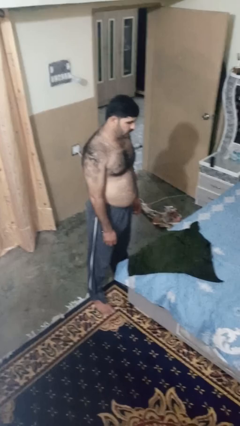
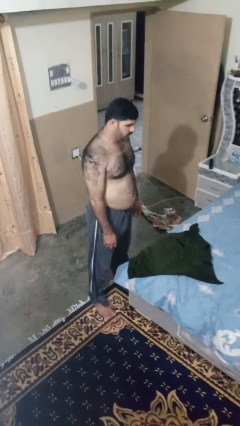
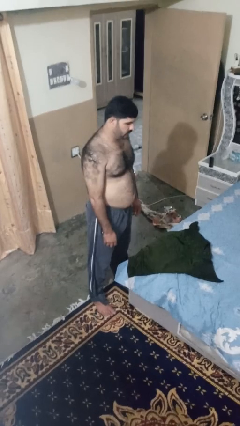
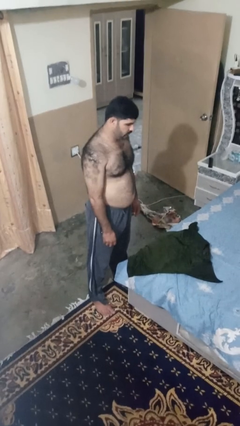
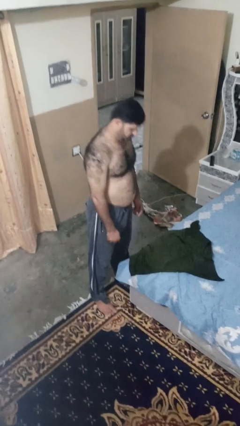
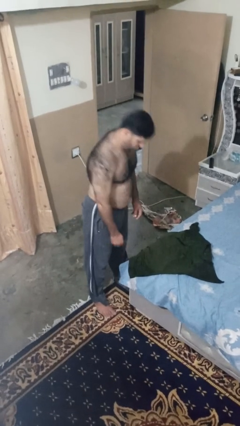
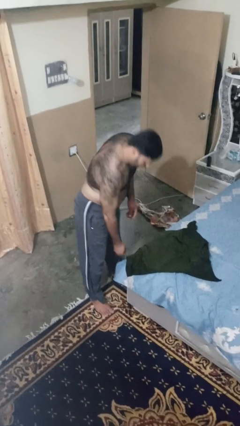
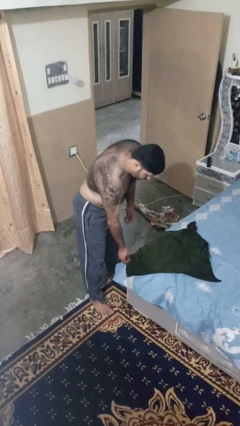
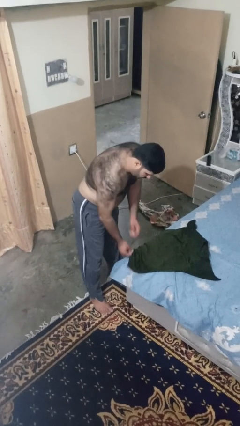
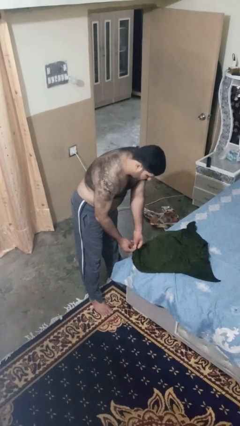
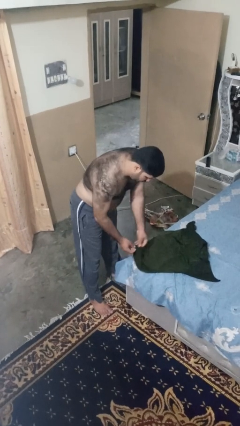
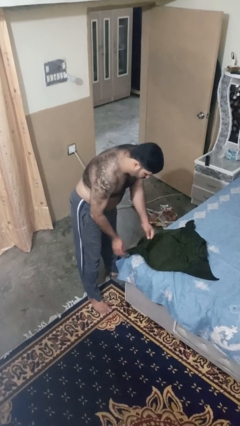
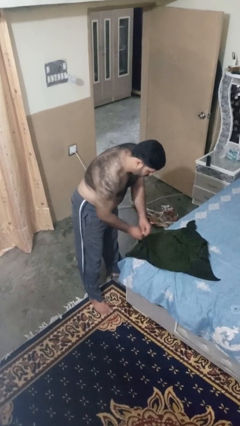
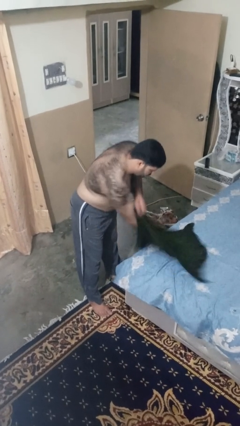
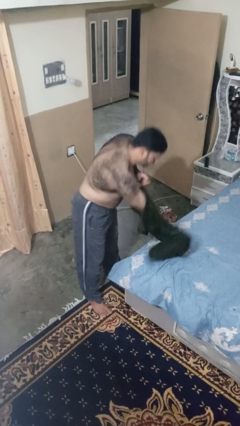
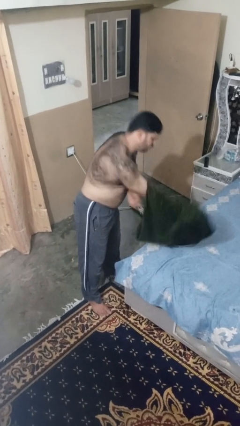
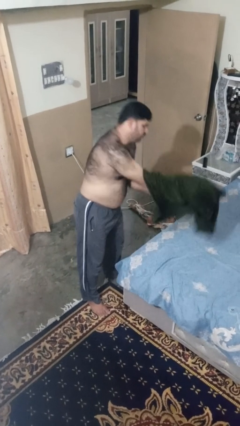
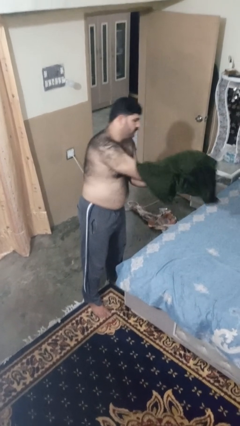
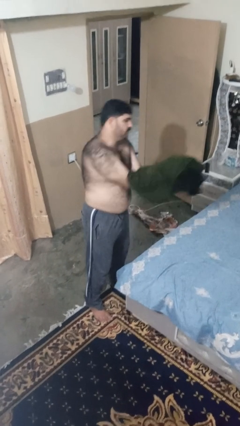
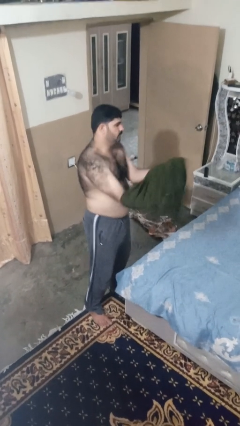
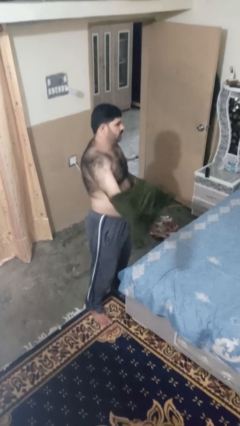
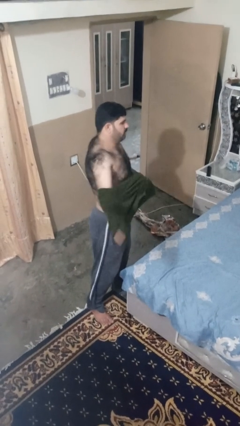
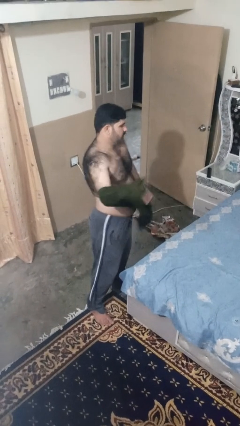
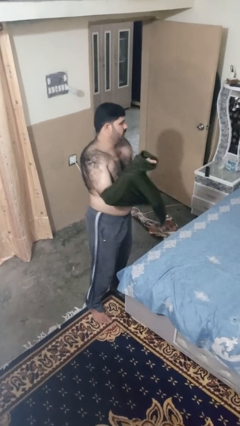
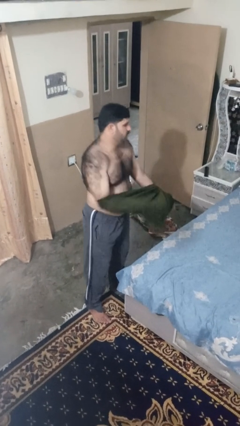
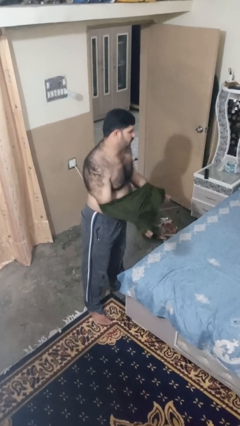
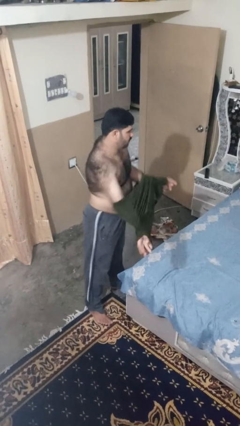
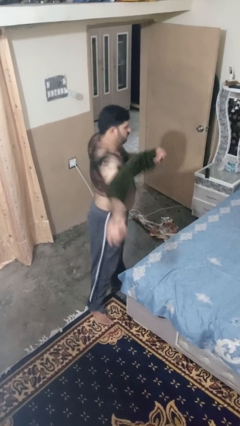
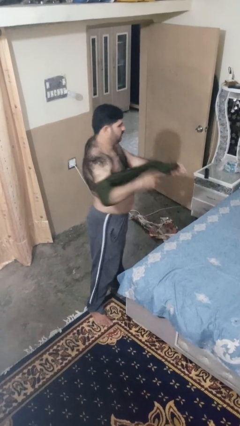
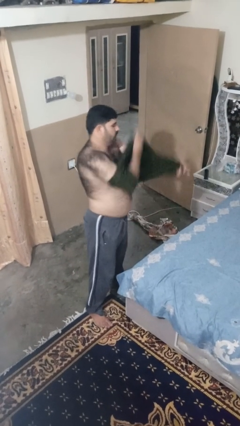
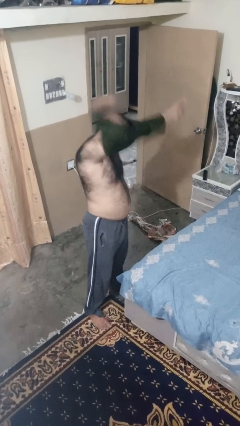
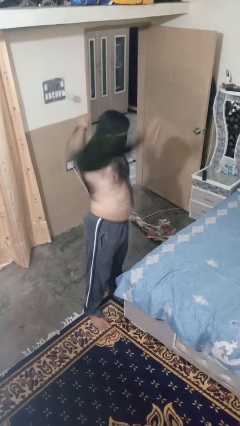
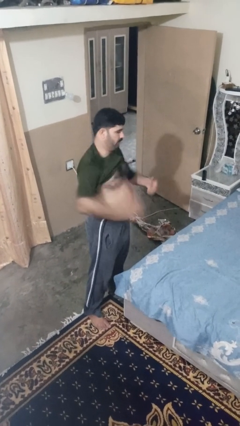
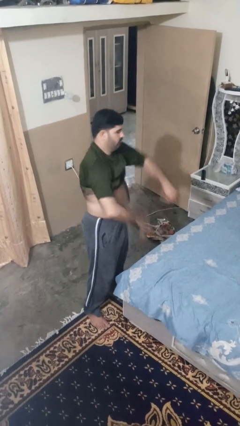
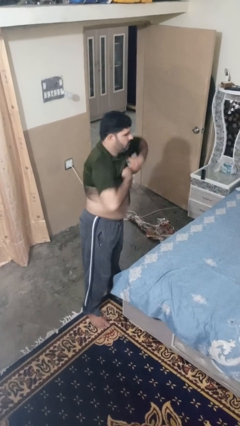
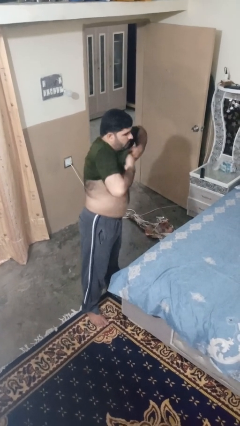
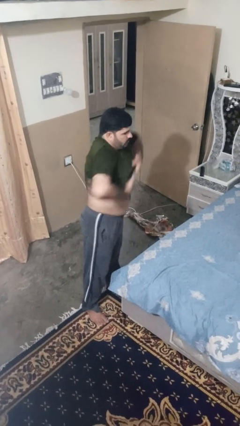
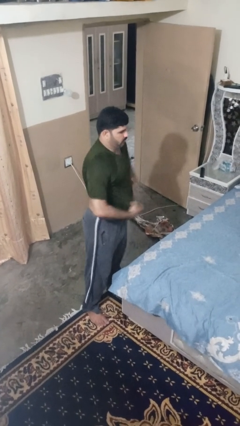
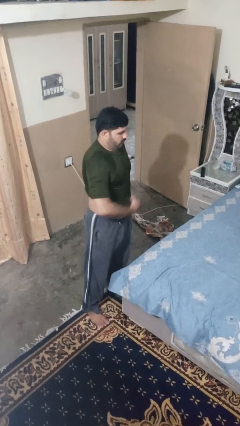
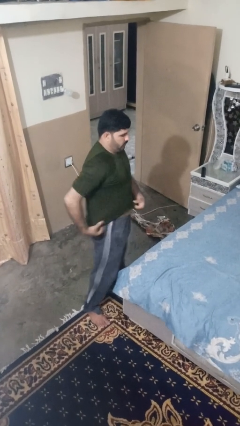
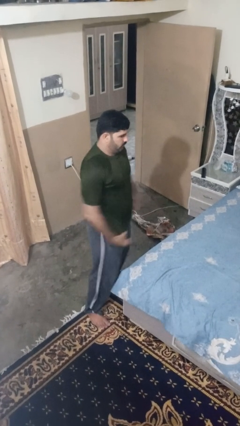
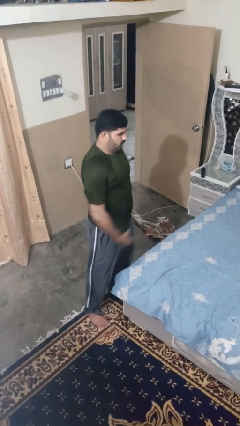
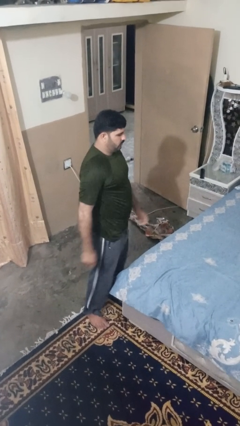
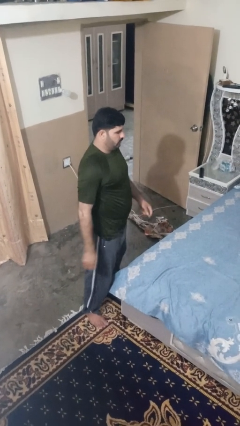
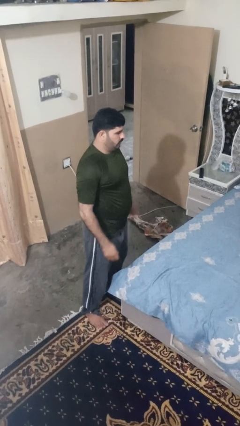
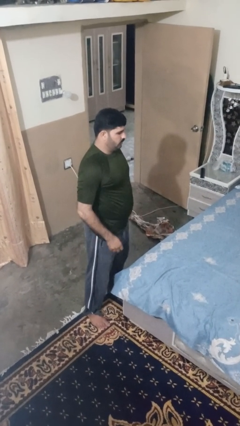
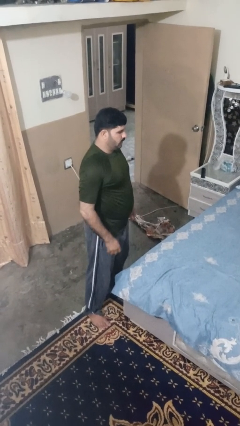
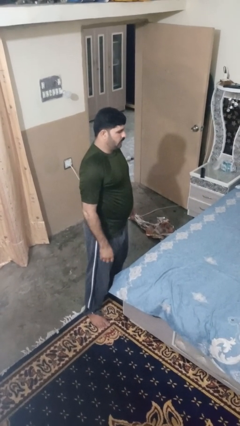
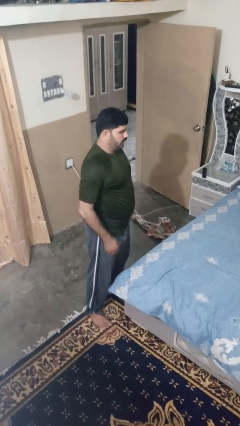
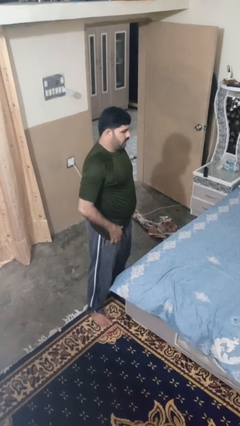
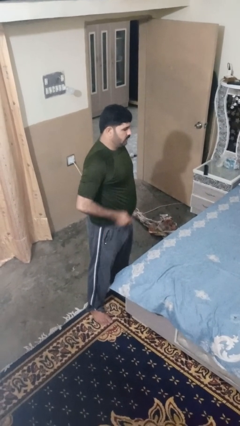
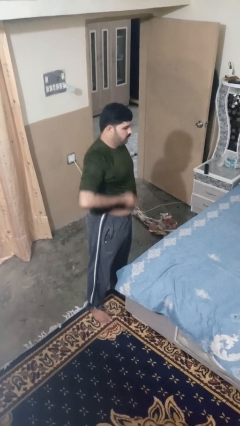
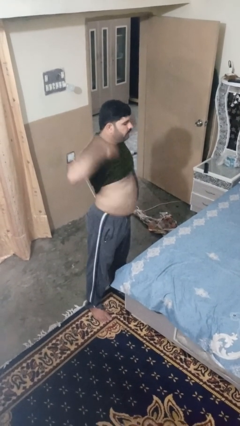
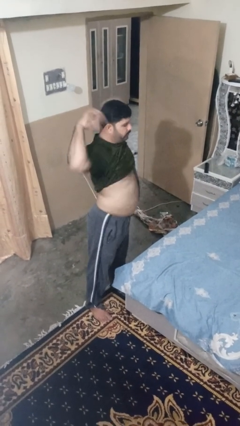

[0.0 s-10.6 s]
person puts on shirt

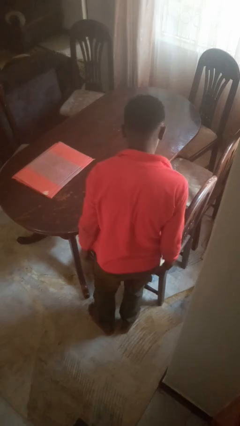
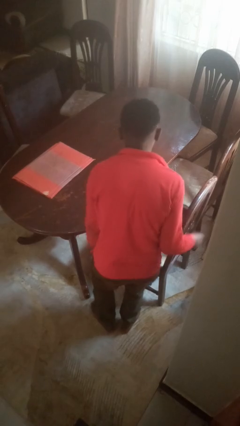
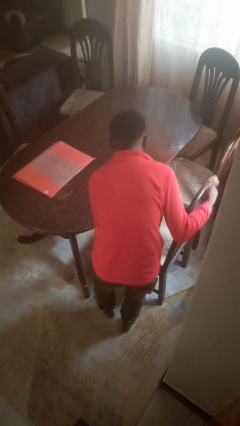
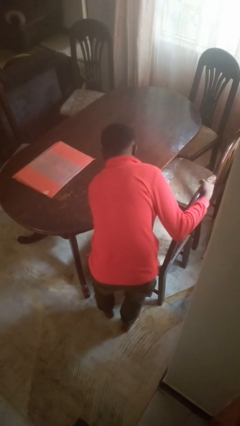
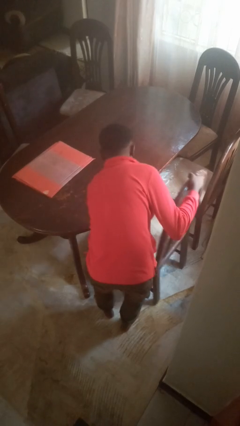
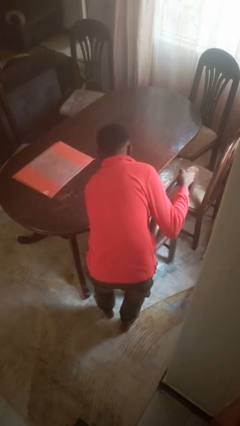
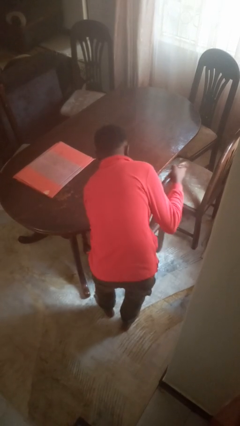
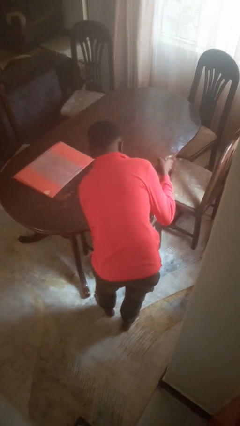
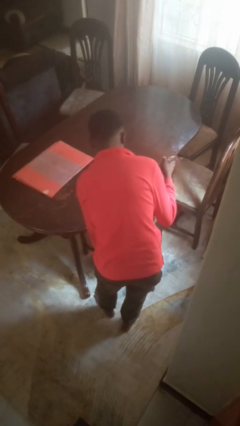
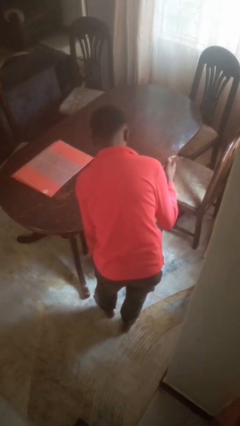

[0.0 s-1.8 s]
person pushes in chair

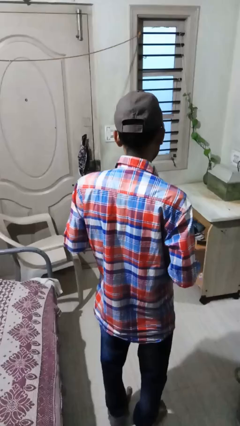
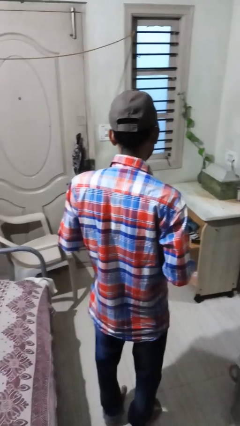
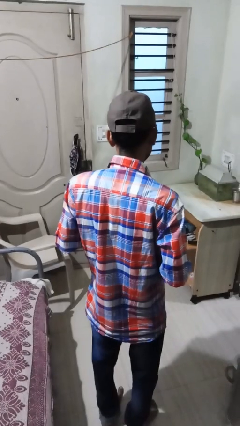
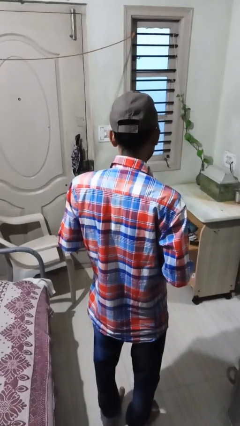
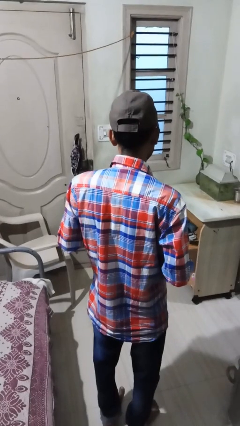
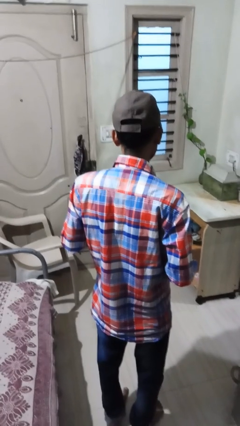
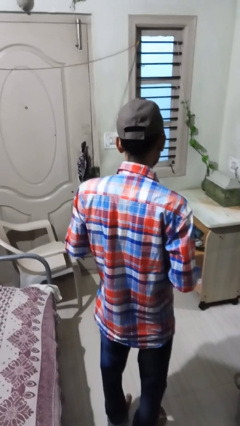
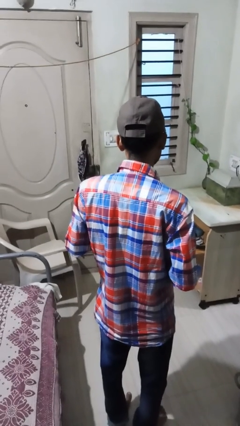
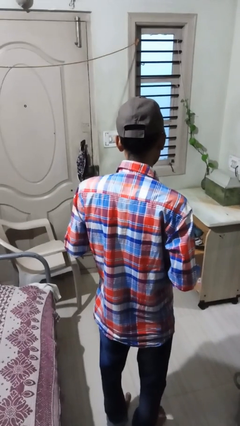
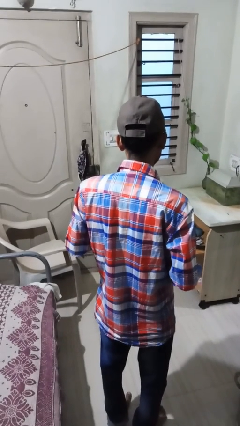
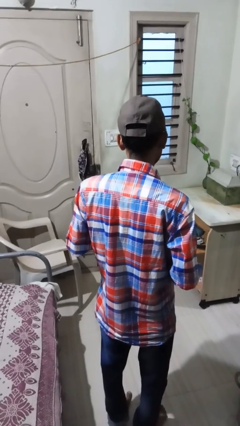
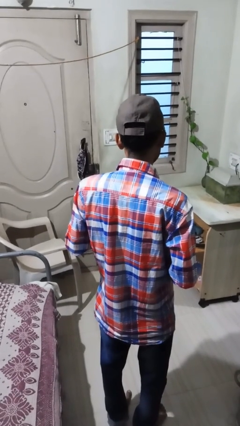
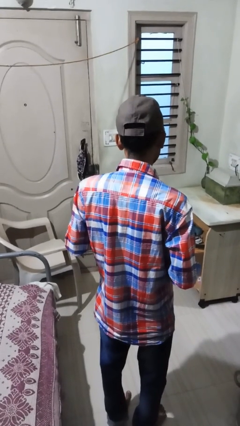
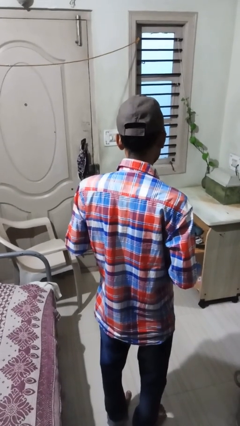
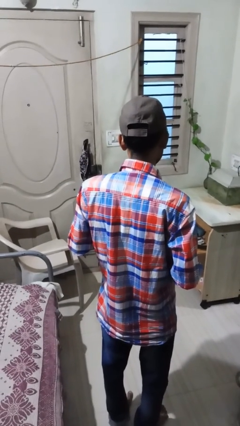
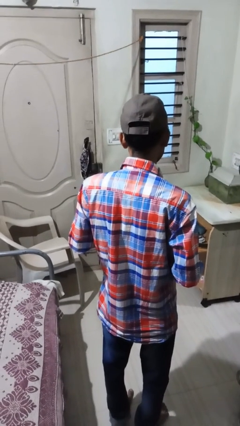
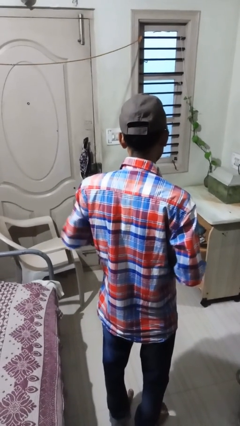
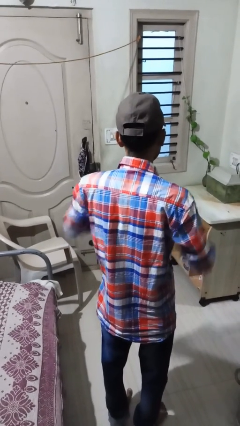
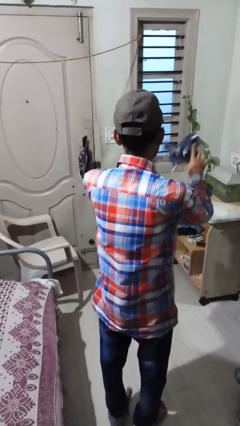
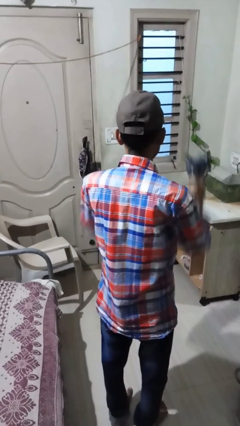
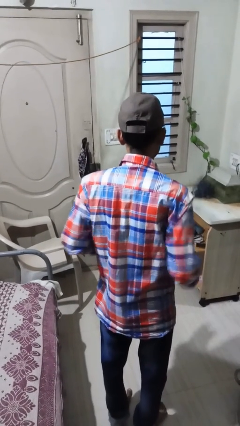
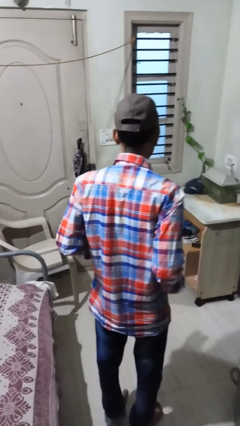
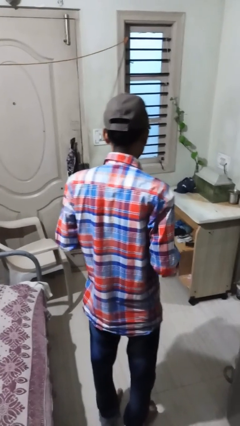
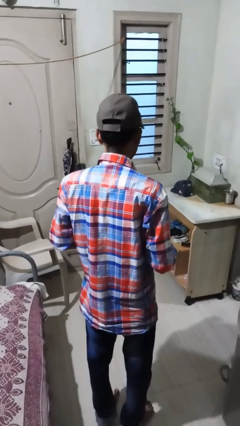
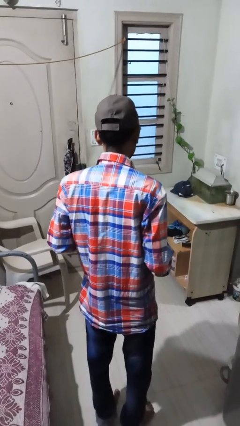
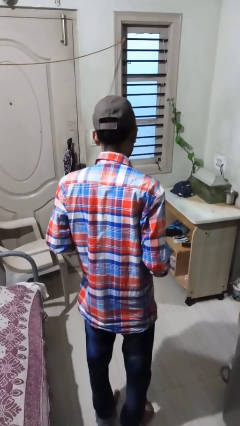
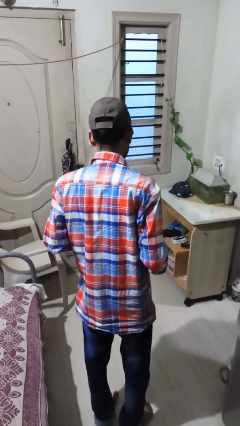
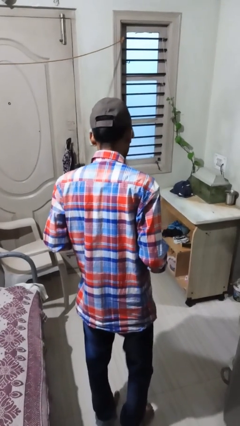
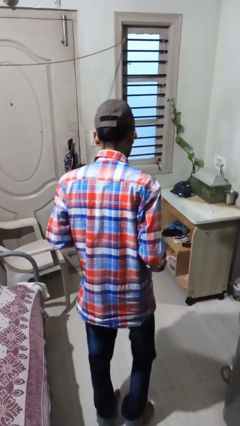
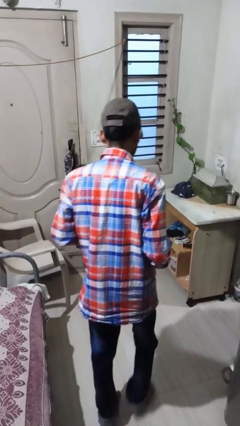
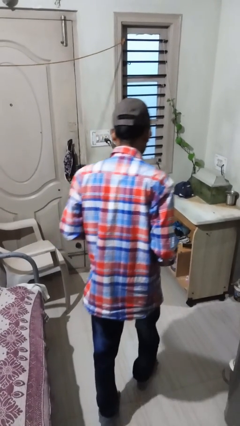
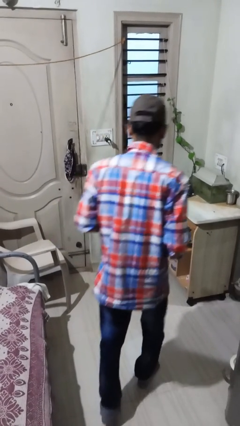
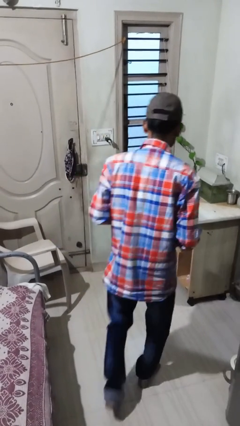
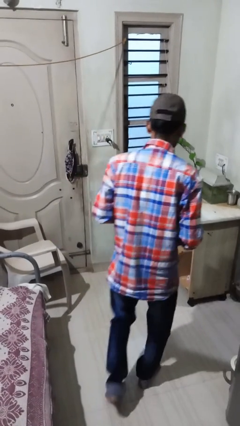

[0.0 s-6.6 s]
person throws object on table
